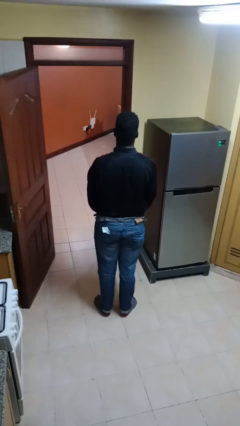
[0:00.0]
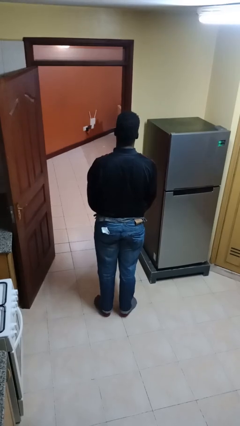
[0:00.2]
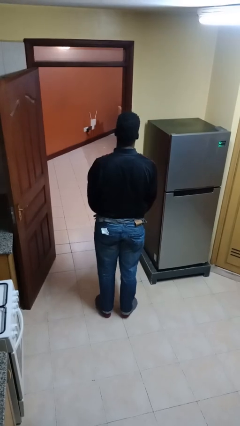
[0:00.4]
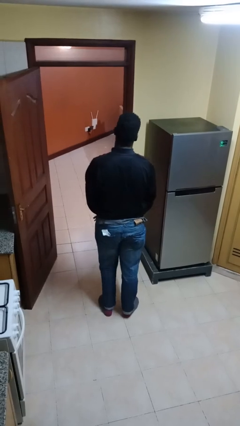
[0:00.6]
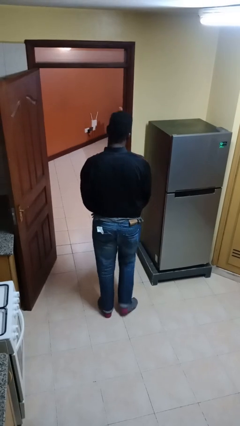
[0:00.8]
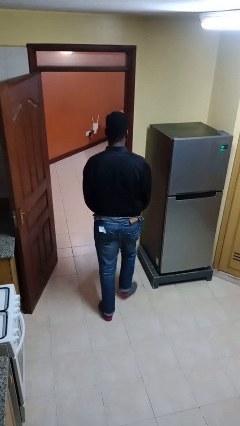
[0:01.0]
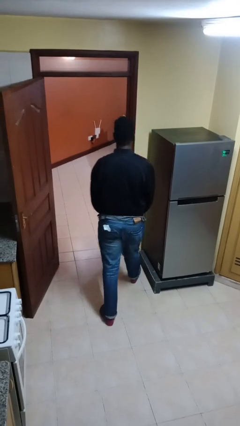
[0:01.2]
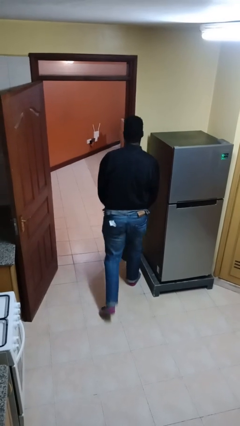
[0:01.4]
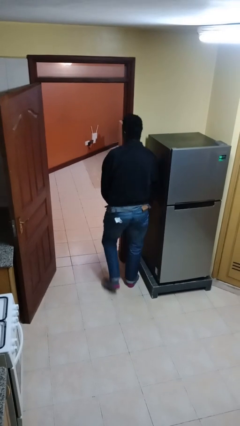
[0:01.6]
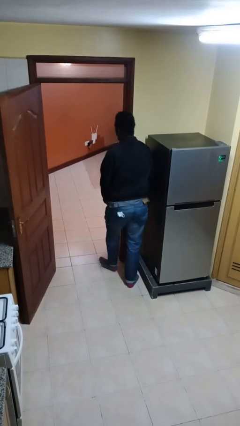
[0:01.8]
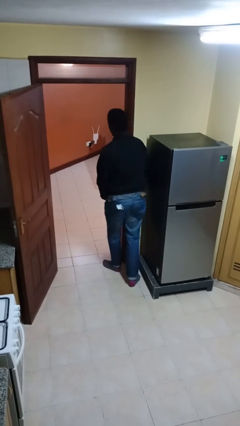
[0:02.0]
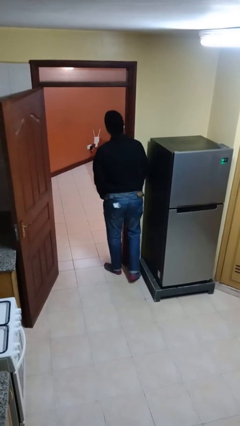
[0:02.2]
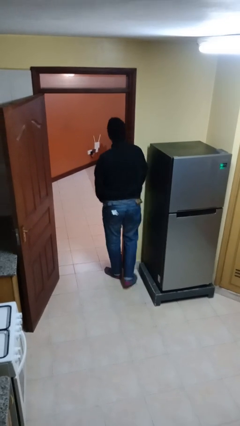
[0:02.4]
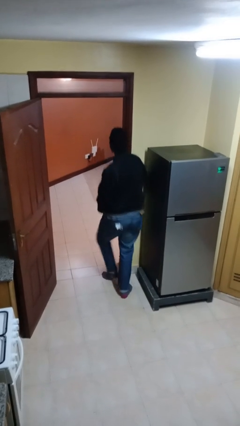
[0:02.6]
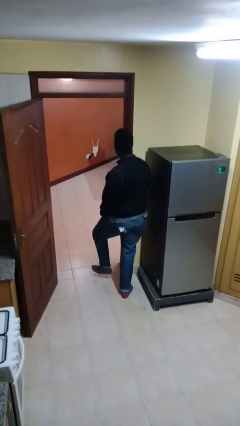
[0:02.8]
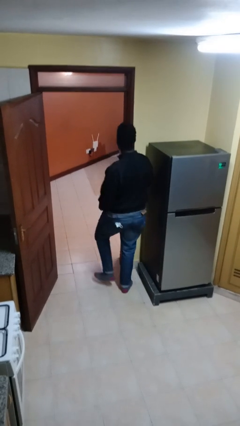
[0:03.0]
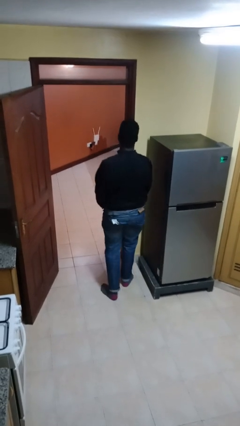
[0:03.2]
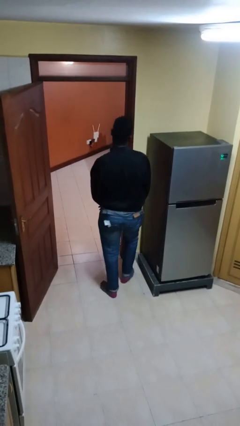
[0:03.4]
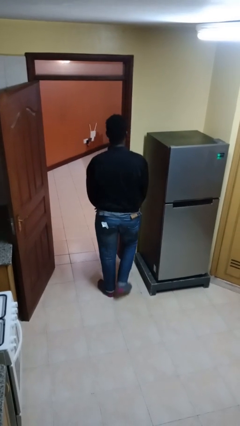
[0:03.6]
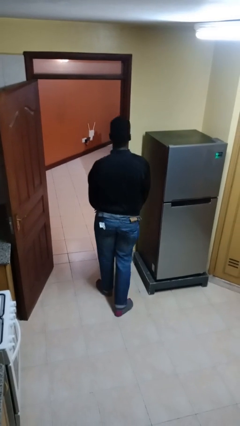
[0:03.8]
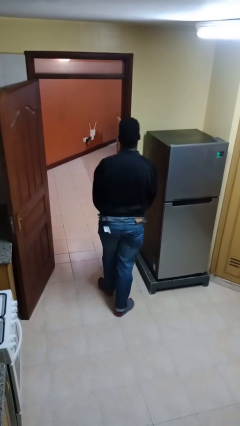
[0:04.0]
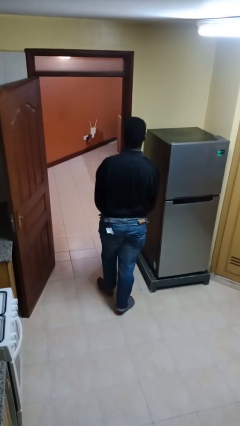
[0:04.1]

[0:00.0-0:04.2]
person bumps into wall

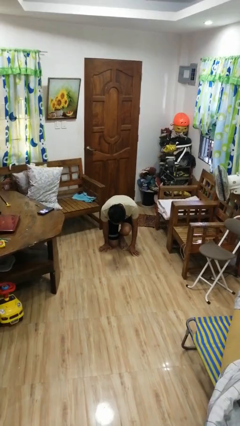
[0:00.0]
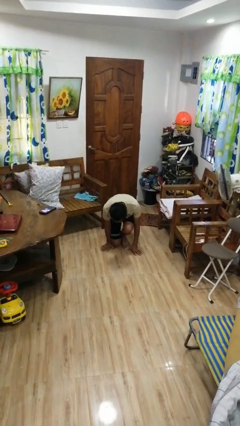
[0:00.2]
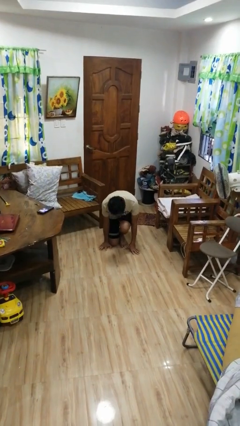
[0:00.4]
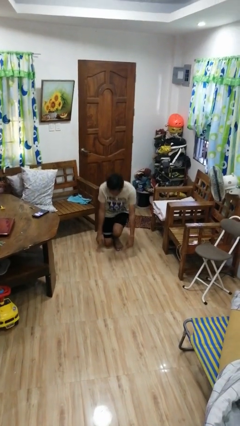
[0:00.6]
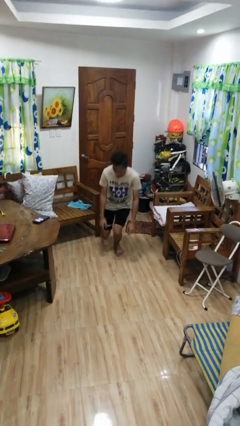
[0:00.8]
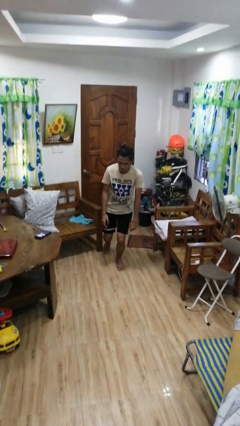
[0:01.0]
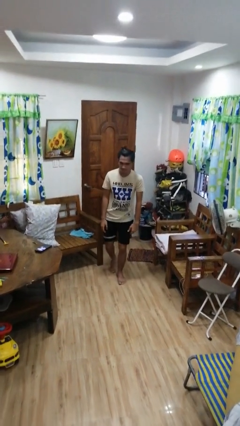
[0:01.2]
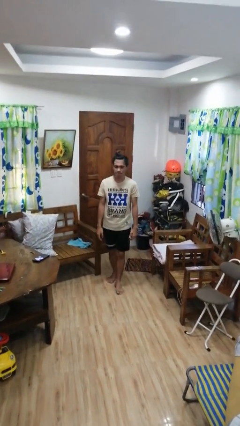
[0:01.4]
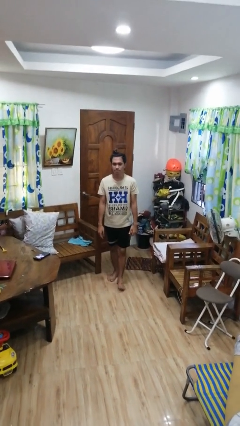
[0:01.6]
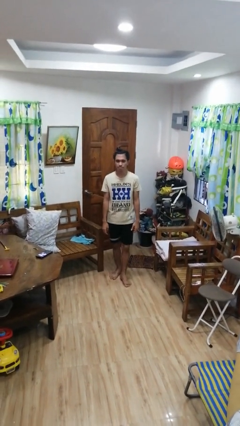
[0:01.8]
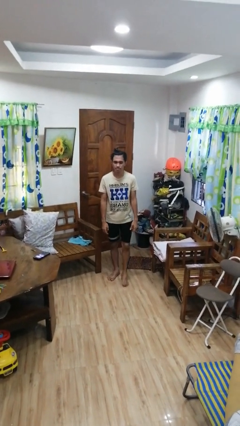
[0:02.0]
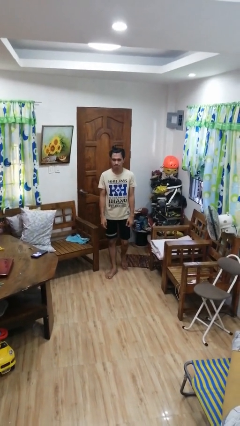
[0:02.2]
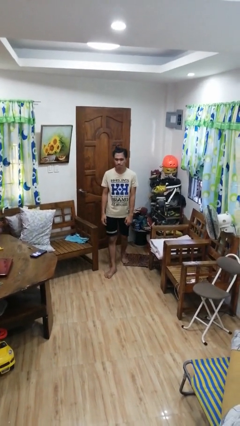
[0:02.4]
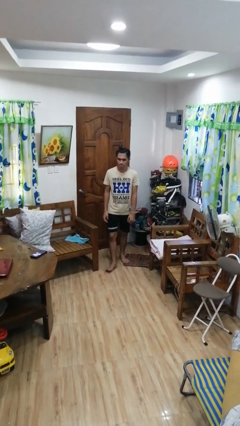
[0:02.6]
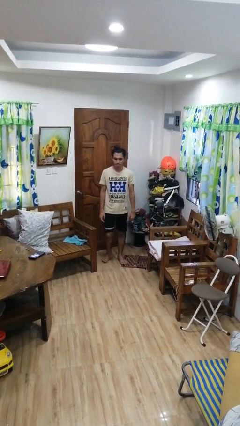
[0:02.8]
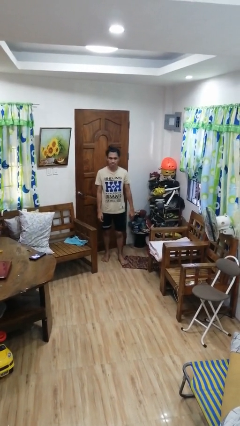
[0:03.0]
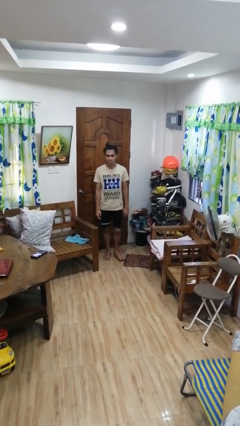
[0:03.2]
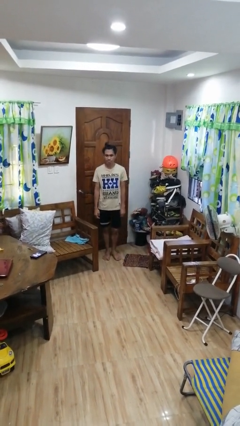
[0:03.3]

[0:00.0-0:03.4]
person stands up from floor

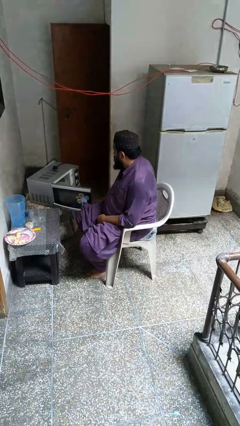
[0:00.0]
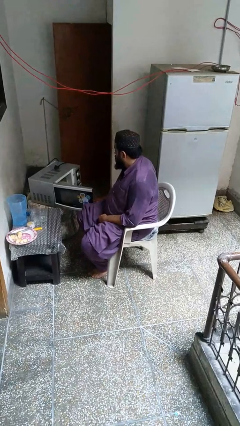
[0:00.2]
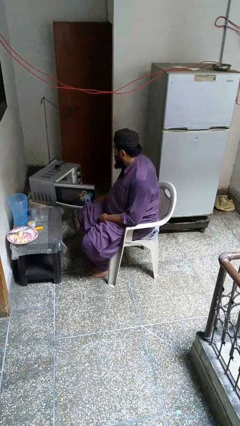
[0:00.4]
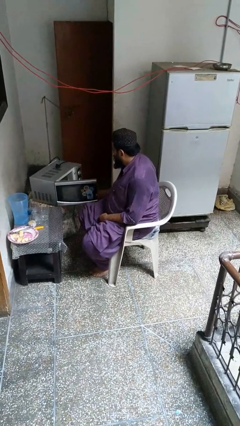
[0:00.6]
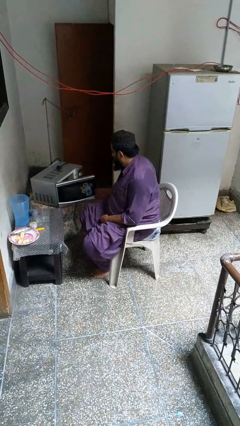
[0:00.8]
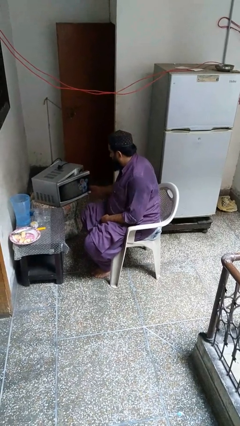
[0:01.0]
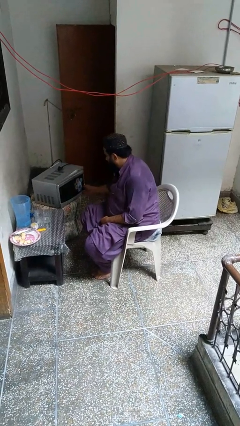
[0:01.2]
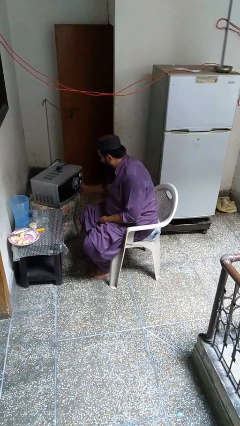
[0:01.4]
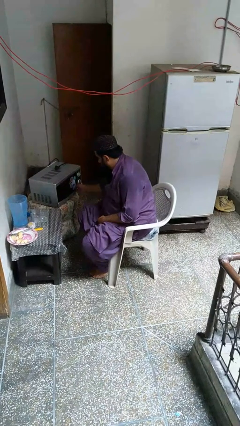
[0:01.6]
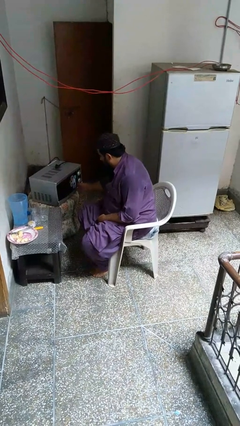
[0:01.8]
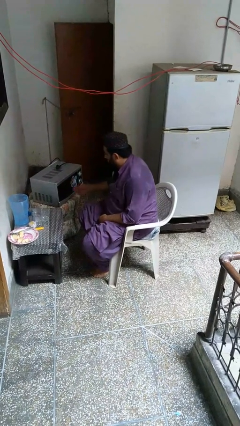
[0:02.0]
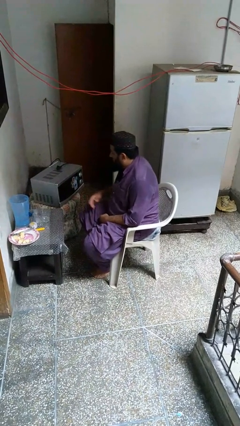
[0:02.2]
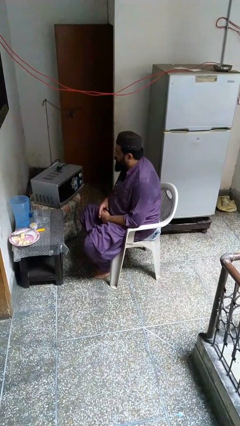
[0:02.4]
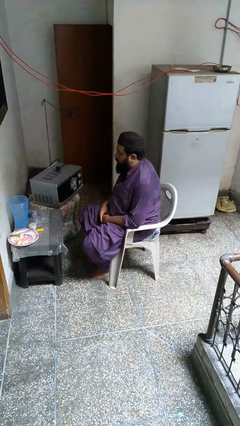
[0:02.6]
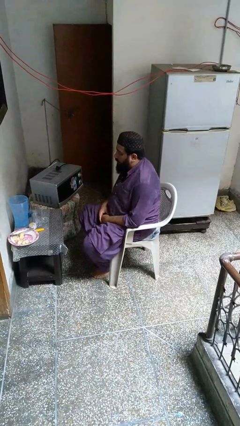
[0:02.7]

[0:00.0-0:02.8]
person closes microwave

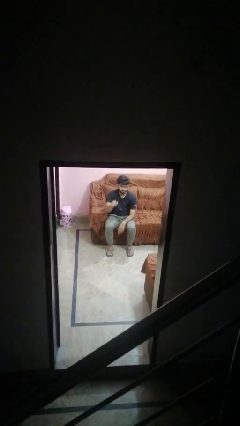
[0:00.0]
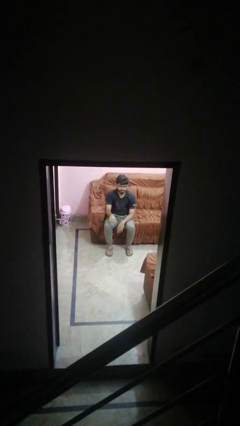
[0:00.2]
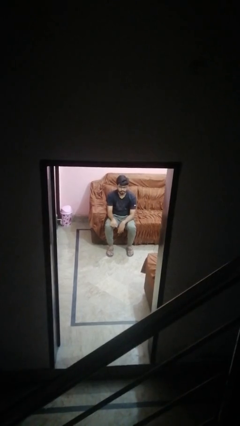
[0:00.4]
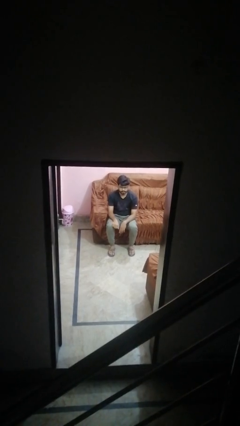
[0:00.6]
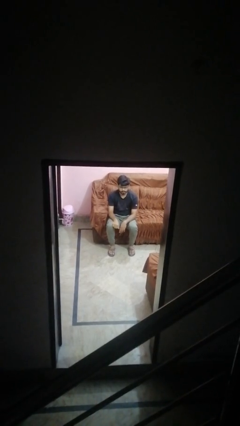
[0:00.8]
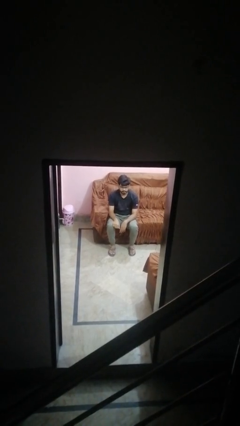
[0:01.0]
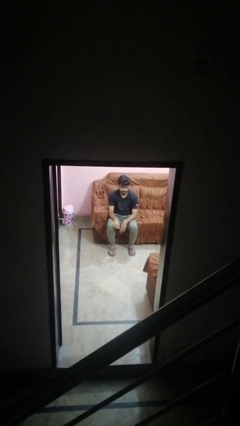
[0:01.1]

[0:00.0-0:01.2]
person gestures lower hand

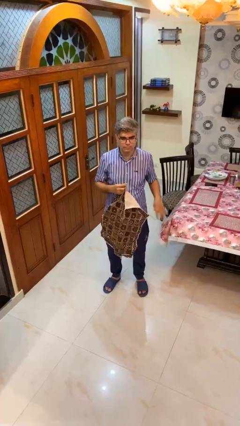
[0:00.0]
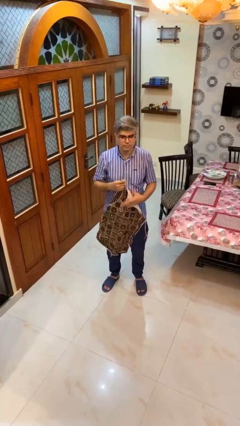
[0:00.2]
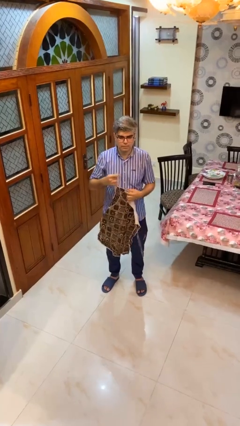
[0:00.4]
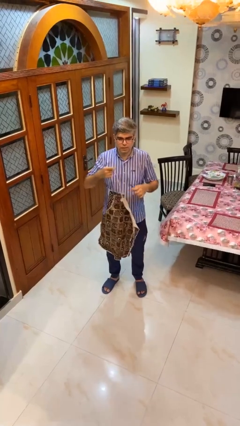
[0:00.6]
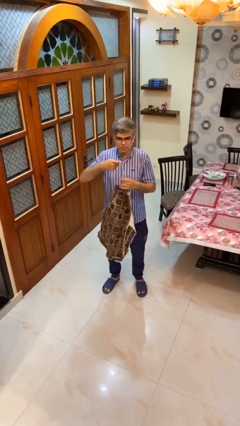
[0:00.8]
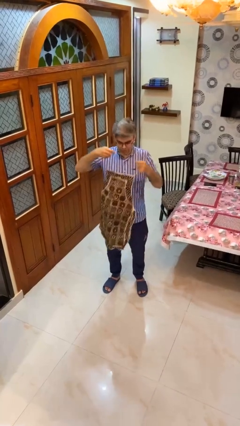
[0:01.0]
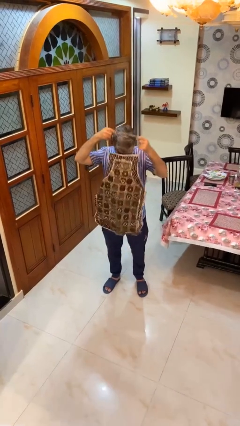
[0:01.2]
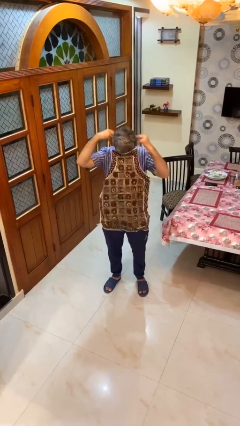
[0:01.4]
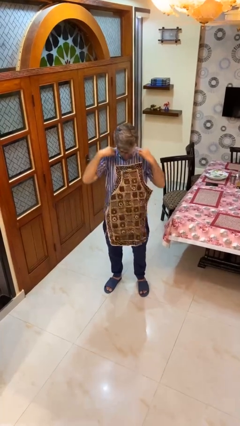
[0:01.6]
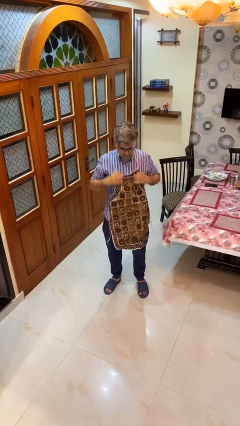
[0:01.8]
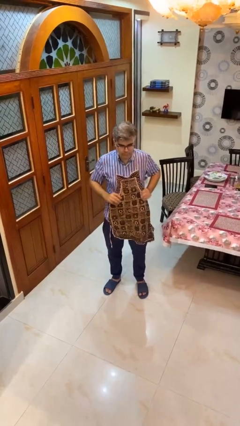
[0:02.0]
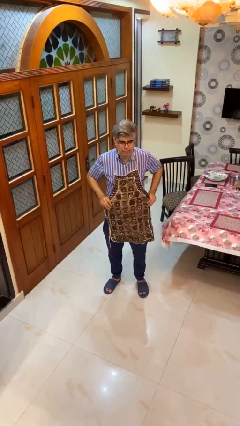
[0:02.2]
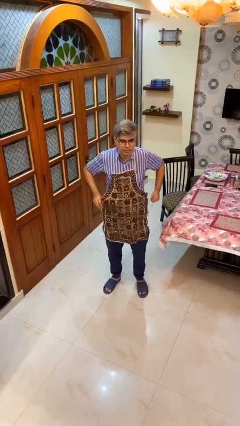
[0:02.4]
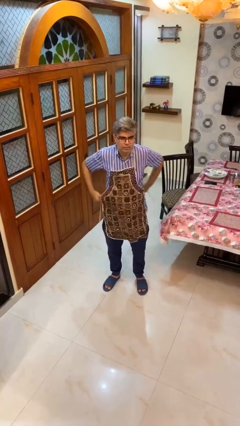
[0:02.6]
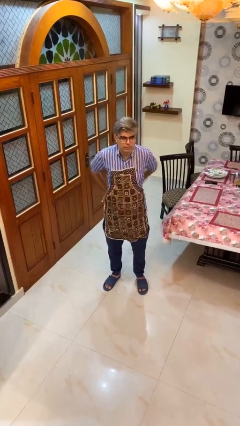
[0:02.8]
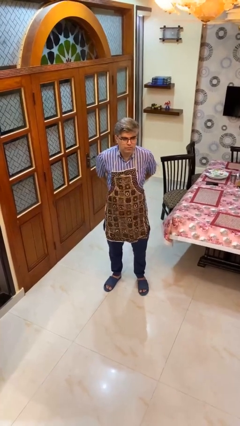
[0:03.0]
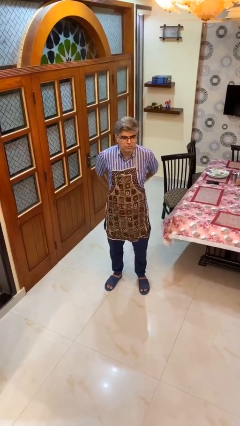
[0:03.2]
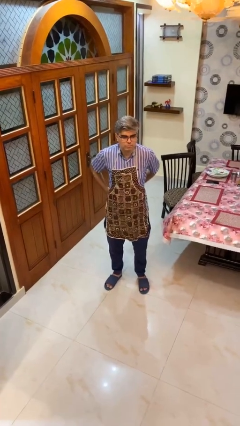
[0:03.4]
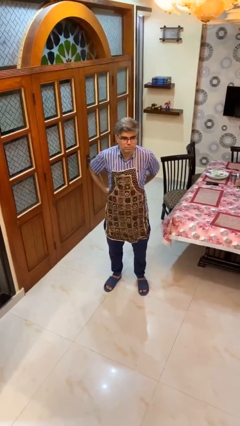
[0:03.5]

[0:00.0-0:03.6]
person puts on apron

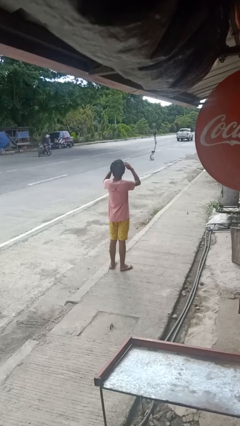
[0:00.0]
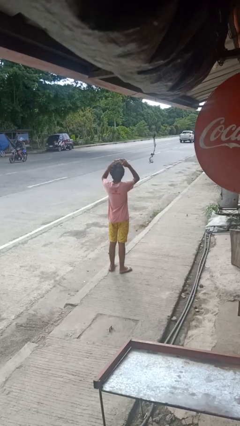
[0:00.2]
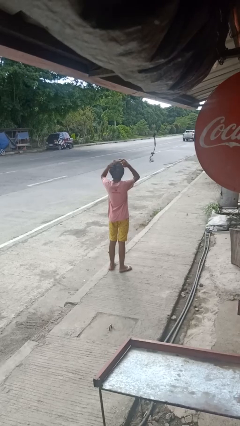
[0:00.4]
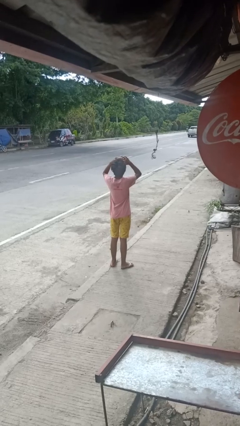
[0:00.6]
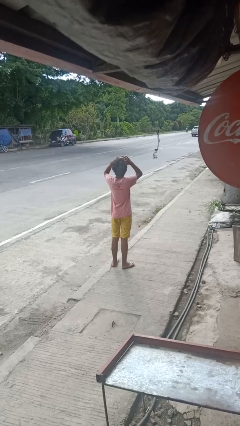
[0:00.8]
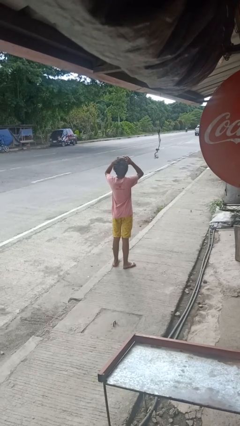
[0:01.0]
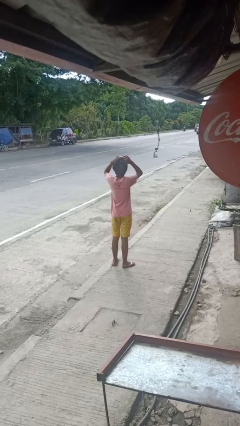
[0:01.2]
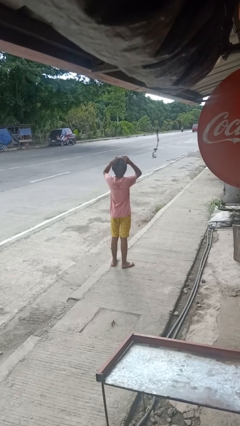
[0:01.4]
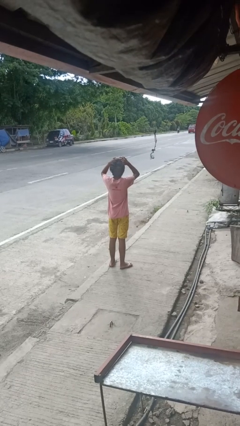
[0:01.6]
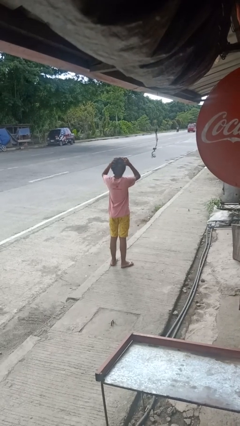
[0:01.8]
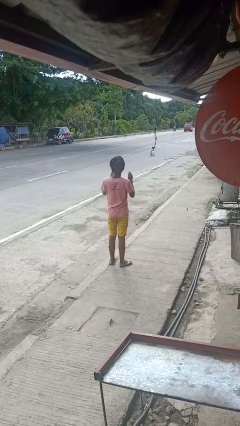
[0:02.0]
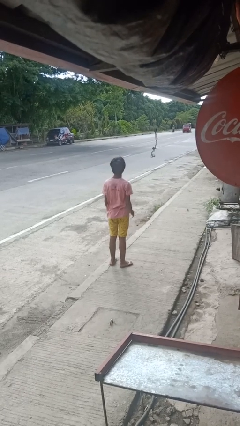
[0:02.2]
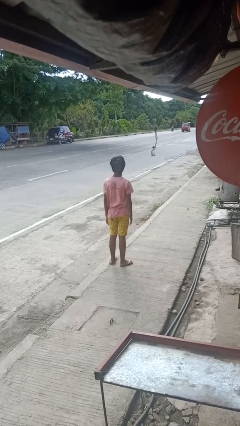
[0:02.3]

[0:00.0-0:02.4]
person shades eyes
